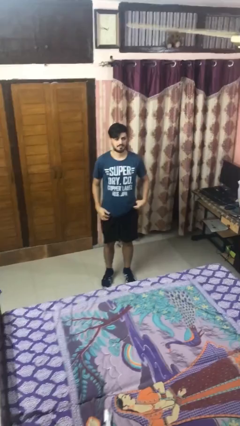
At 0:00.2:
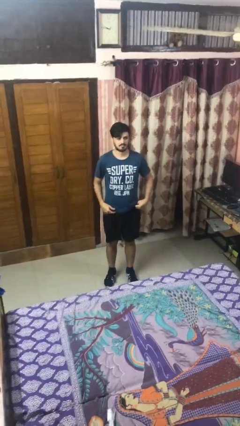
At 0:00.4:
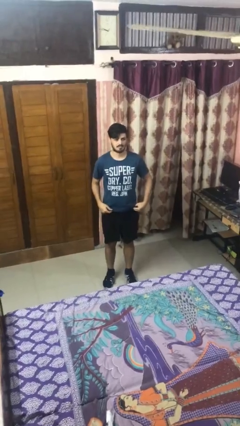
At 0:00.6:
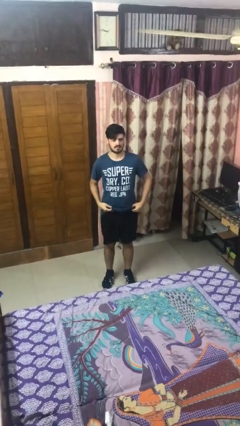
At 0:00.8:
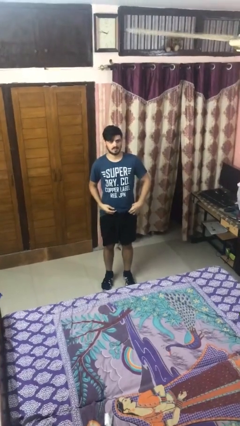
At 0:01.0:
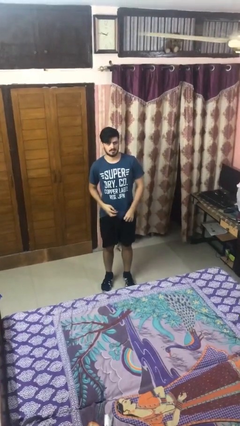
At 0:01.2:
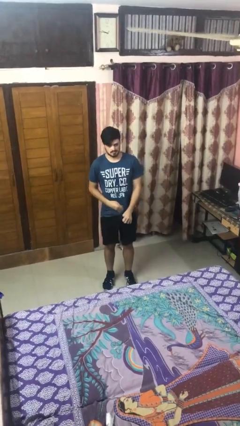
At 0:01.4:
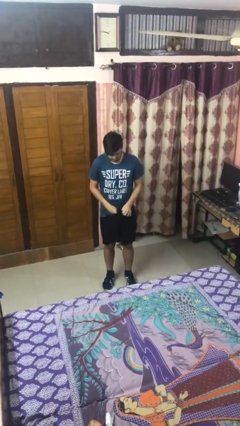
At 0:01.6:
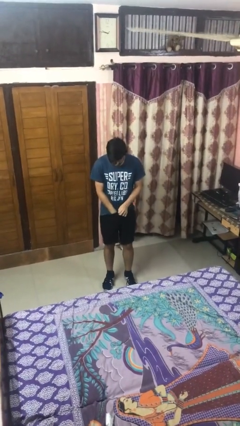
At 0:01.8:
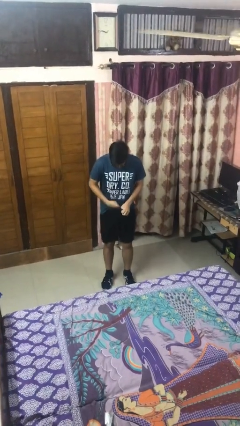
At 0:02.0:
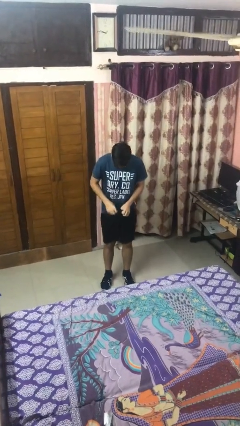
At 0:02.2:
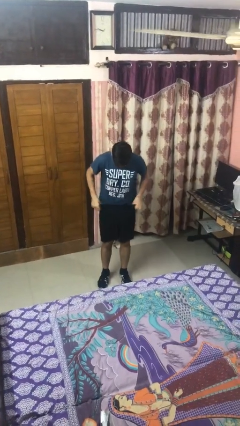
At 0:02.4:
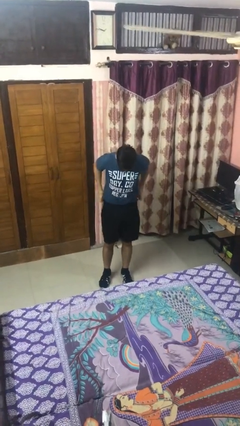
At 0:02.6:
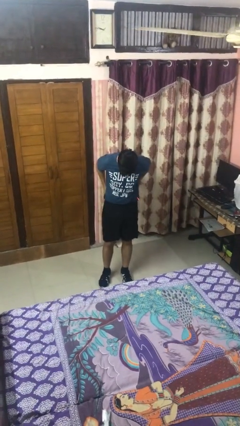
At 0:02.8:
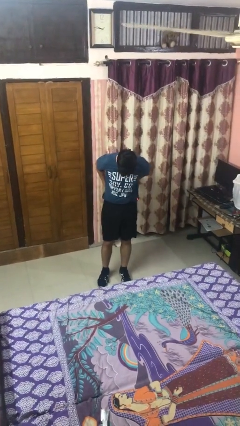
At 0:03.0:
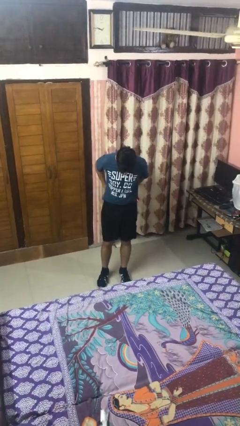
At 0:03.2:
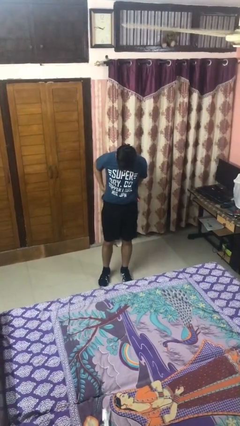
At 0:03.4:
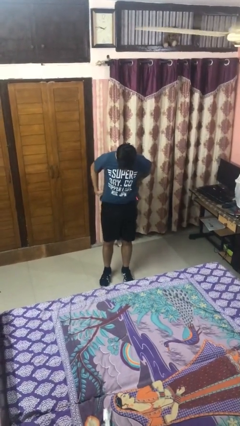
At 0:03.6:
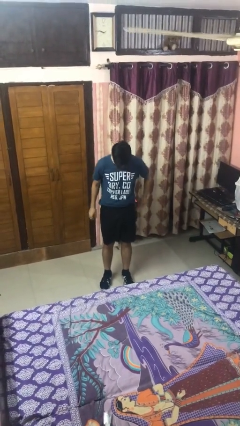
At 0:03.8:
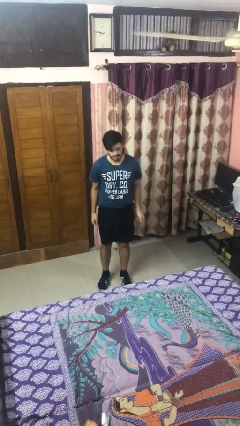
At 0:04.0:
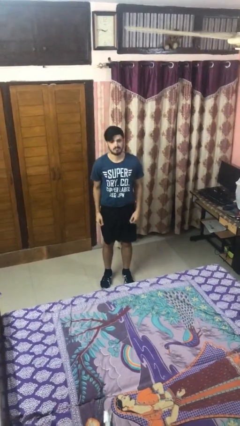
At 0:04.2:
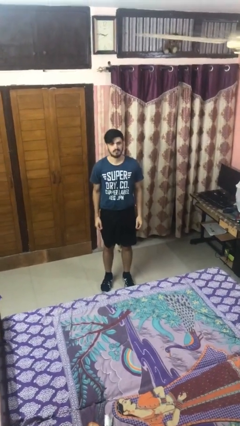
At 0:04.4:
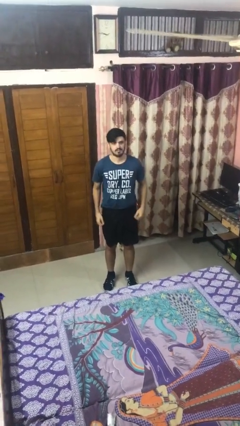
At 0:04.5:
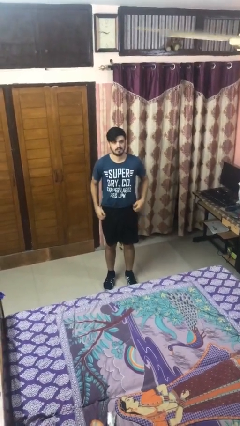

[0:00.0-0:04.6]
person tucks in shirt

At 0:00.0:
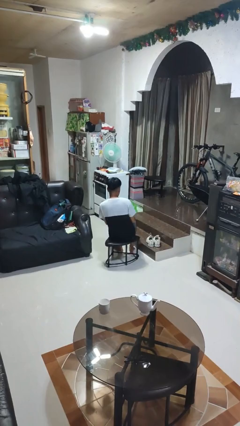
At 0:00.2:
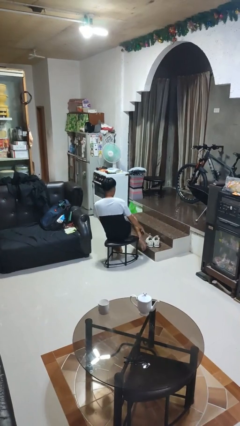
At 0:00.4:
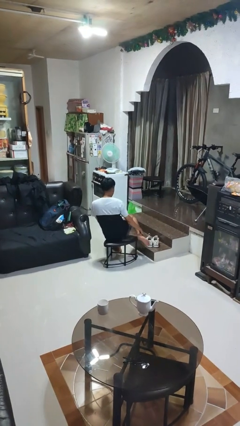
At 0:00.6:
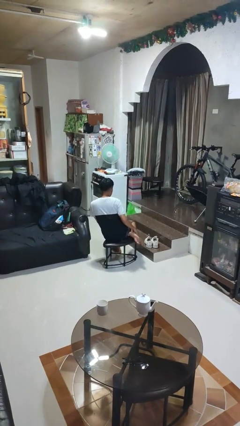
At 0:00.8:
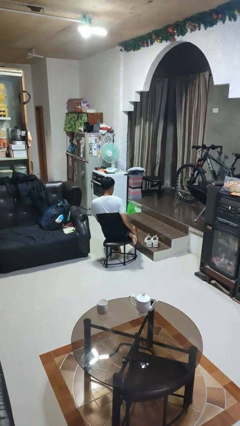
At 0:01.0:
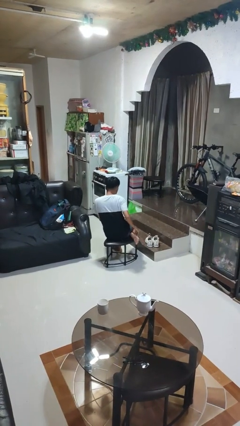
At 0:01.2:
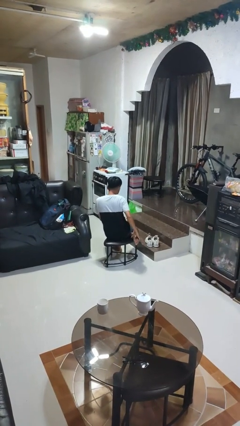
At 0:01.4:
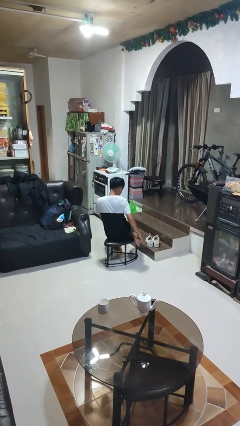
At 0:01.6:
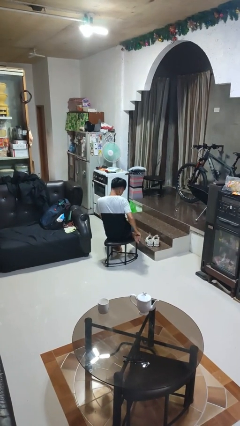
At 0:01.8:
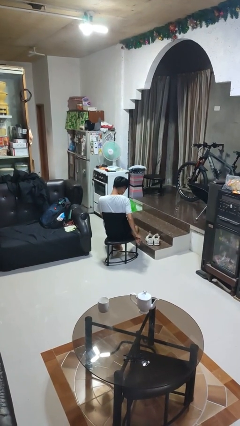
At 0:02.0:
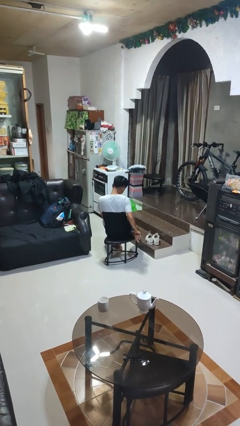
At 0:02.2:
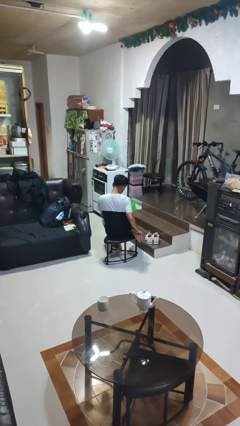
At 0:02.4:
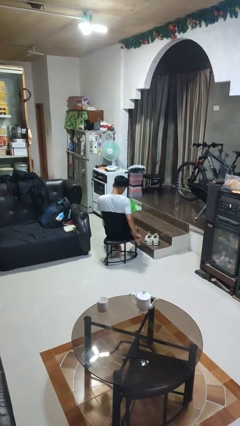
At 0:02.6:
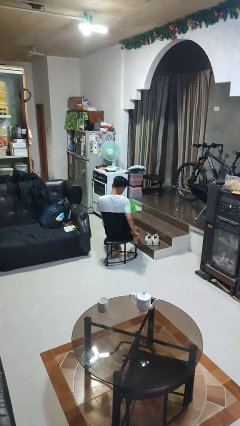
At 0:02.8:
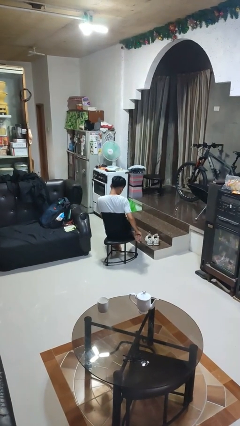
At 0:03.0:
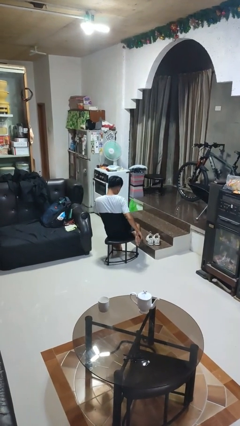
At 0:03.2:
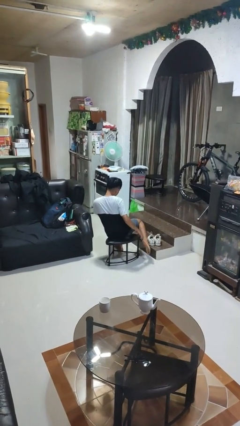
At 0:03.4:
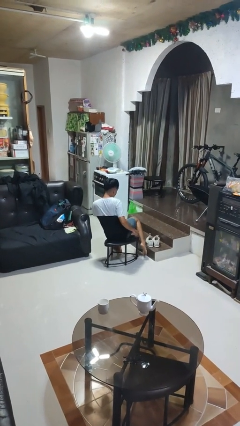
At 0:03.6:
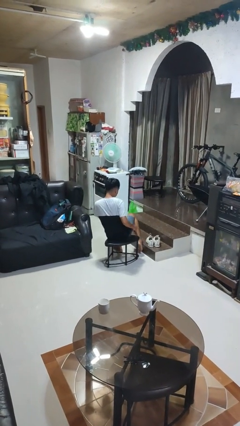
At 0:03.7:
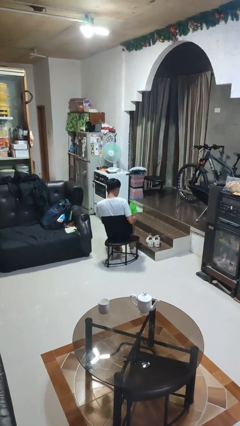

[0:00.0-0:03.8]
person rubs foot

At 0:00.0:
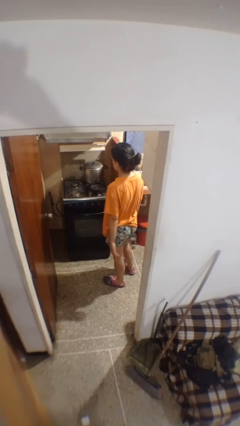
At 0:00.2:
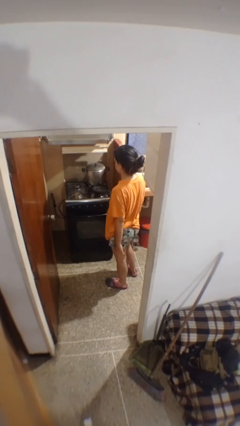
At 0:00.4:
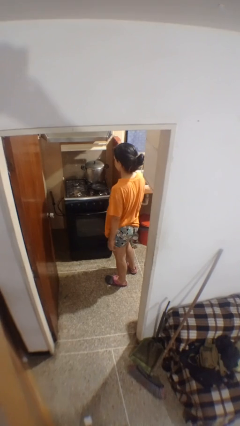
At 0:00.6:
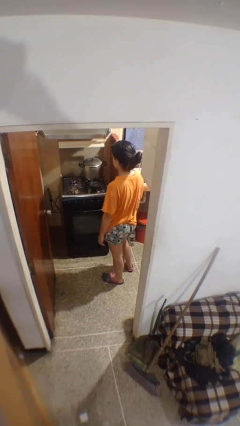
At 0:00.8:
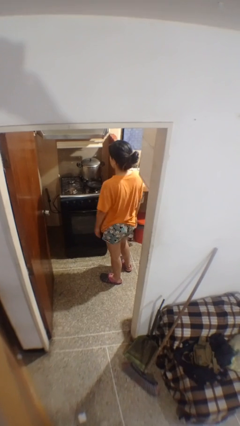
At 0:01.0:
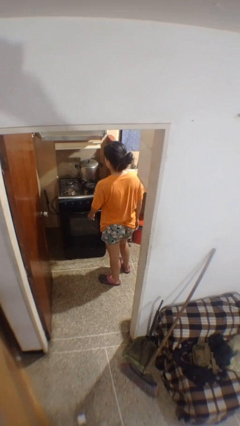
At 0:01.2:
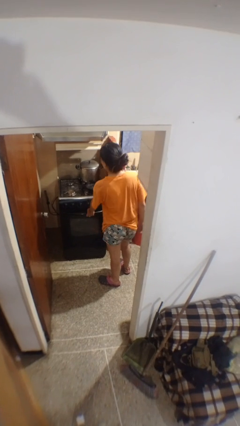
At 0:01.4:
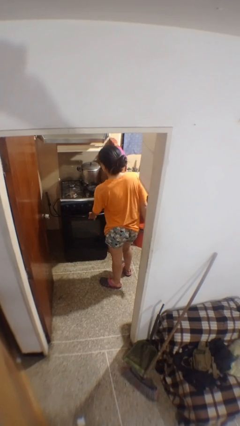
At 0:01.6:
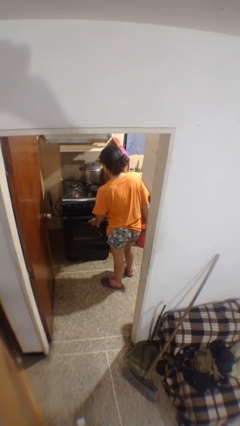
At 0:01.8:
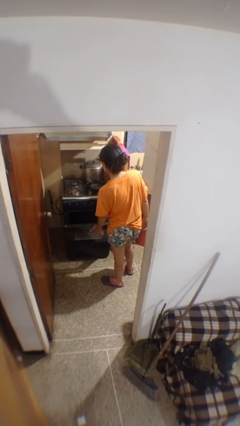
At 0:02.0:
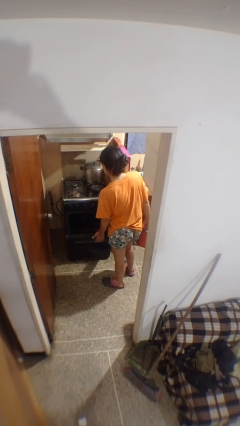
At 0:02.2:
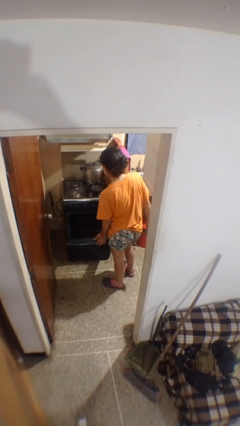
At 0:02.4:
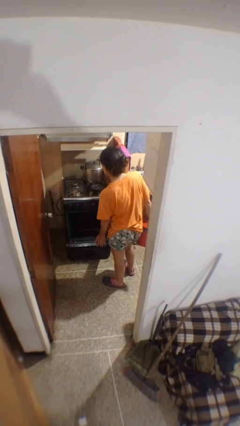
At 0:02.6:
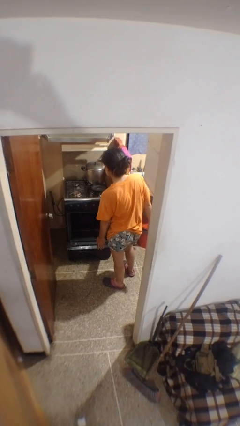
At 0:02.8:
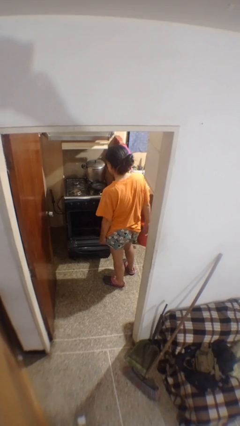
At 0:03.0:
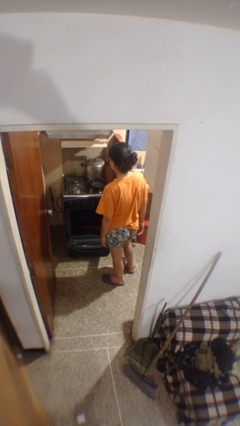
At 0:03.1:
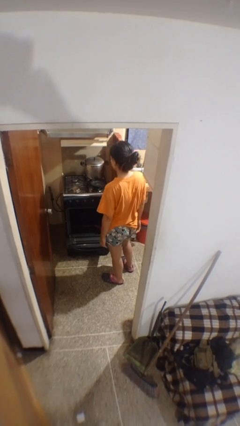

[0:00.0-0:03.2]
person opens oven door

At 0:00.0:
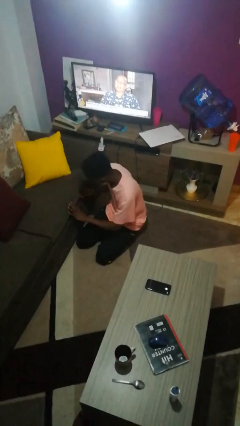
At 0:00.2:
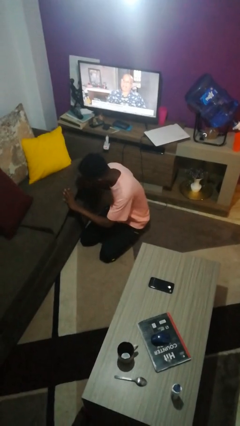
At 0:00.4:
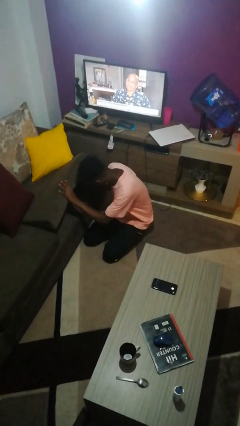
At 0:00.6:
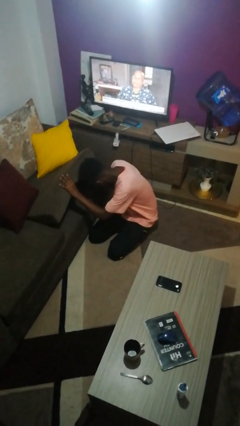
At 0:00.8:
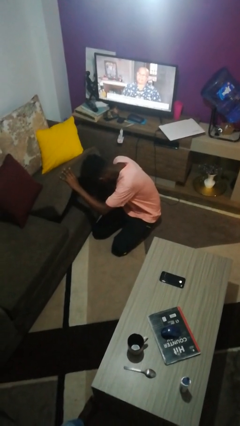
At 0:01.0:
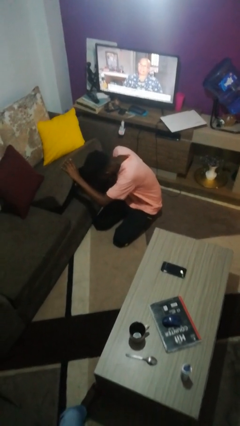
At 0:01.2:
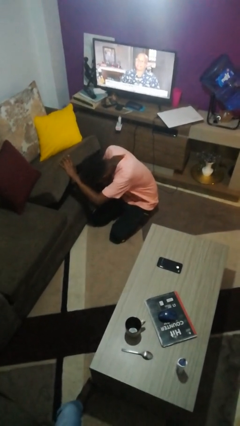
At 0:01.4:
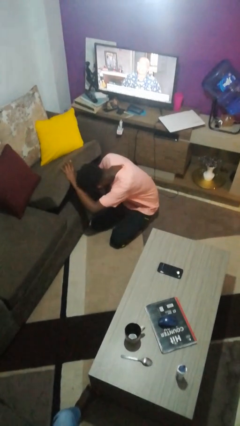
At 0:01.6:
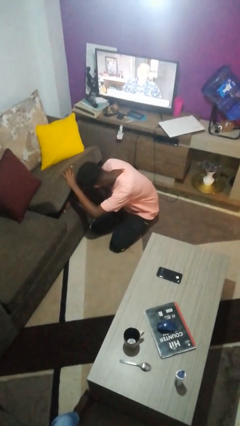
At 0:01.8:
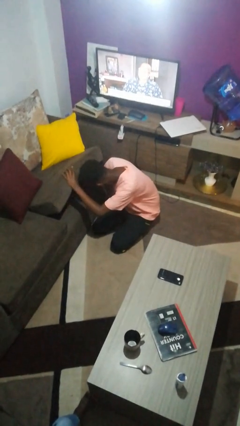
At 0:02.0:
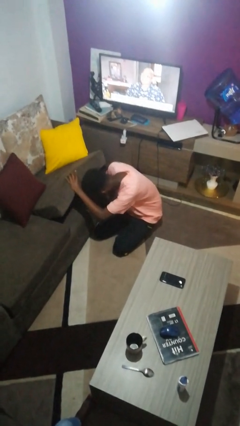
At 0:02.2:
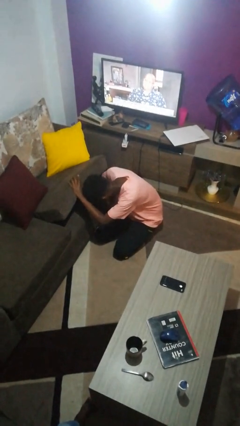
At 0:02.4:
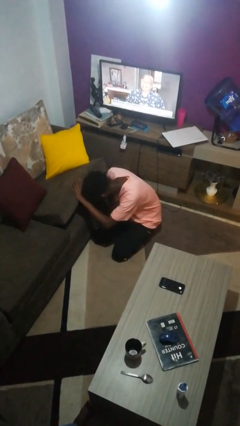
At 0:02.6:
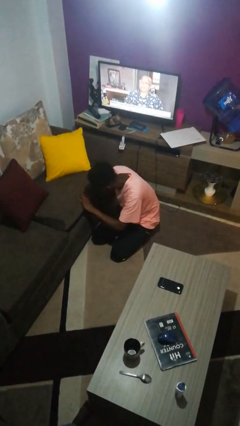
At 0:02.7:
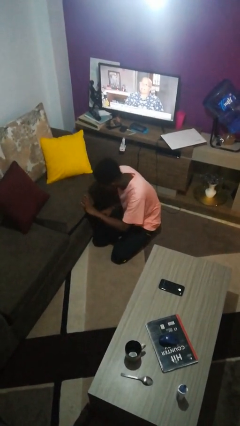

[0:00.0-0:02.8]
person searches under couch

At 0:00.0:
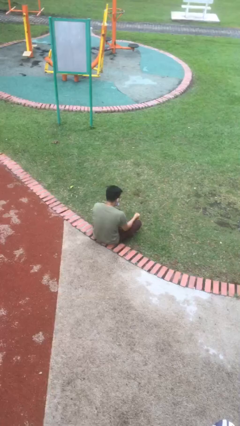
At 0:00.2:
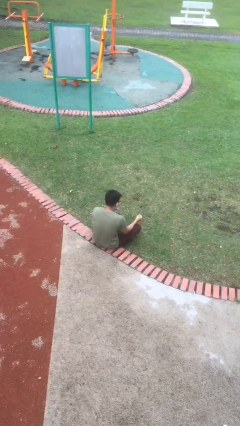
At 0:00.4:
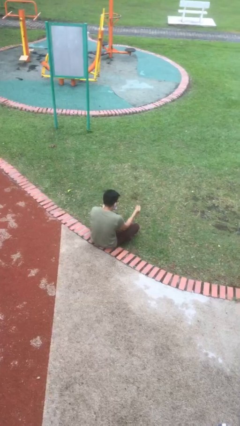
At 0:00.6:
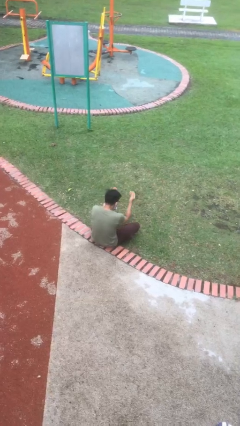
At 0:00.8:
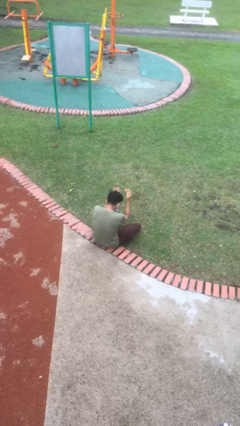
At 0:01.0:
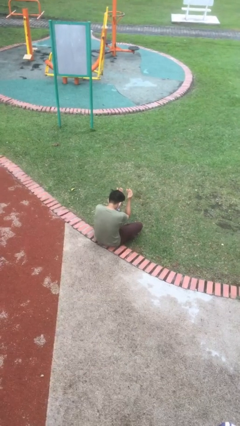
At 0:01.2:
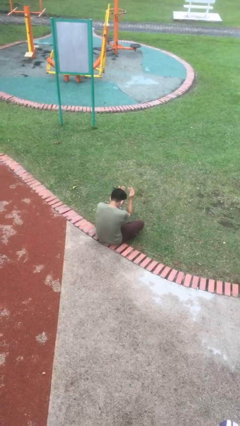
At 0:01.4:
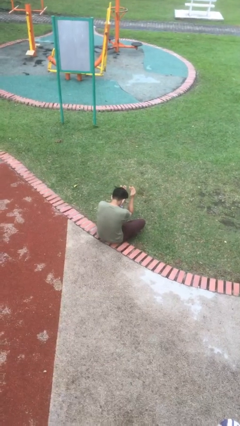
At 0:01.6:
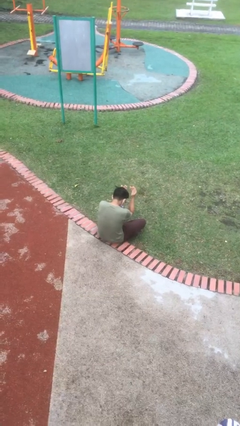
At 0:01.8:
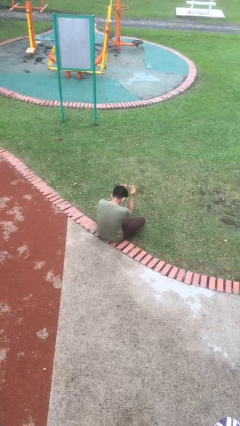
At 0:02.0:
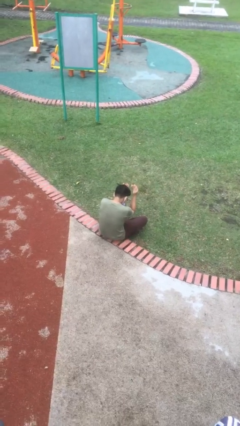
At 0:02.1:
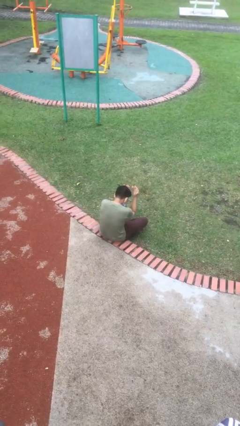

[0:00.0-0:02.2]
person prays

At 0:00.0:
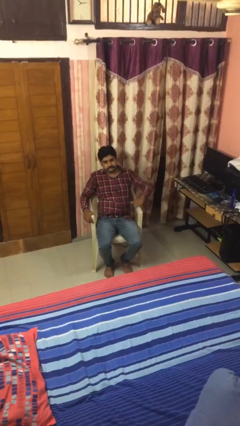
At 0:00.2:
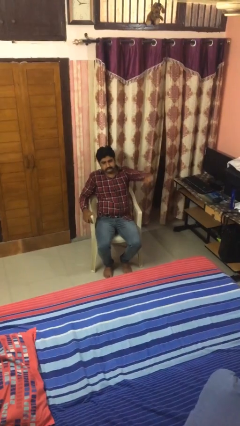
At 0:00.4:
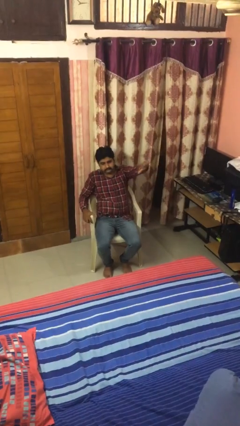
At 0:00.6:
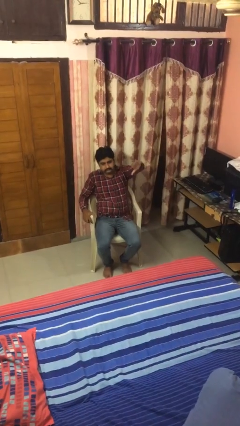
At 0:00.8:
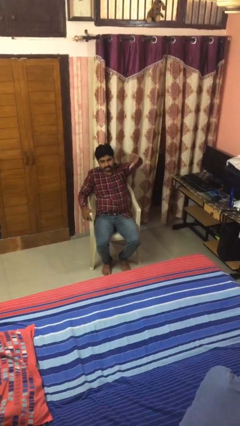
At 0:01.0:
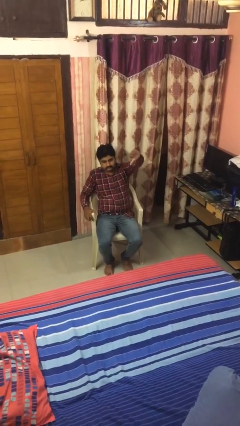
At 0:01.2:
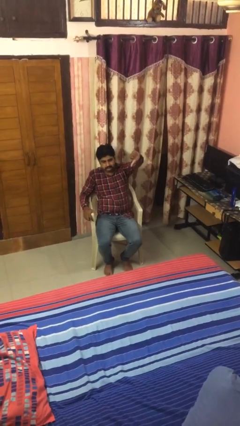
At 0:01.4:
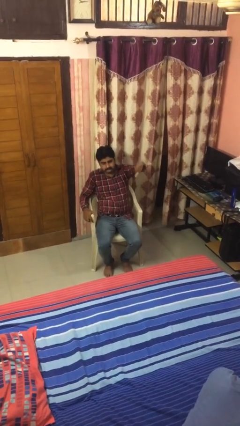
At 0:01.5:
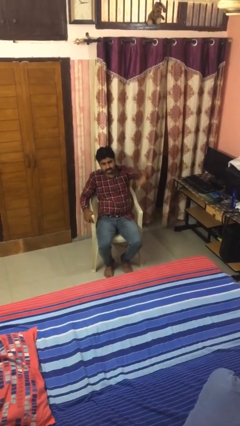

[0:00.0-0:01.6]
person gestures thumbs down
